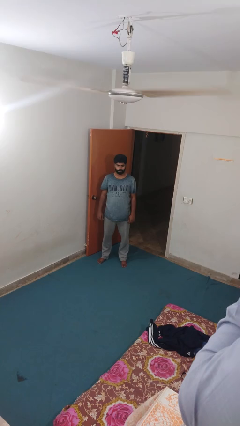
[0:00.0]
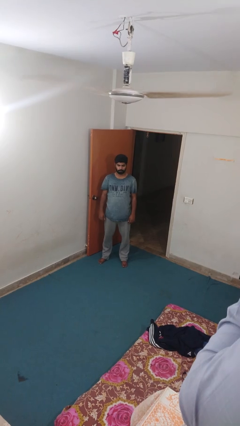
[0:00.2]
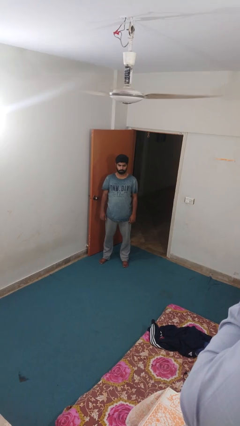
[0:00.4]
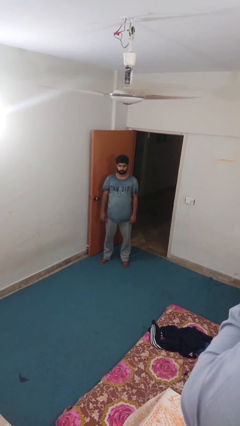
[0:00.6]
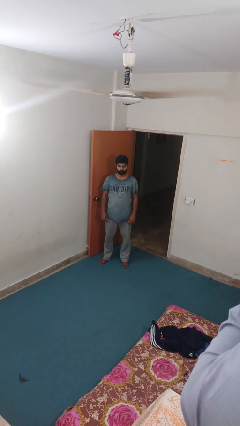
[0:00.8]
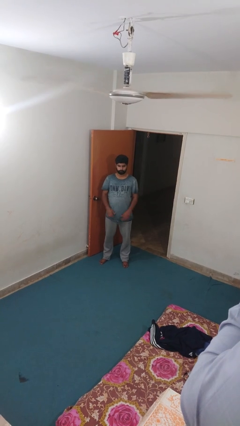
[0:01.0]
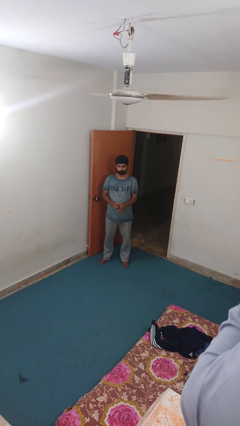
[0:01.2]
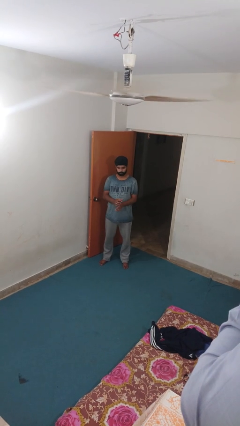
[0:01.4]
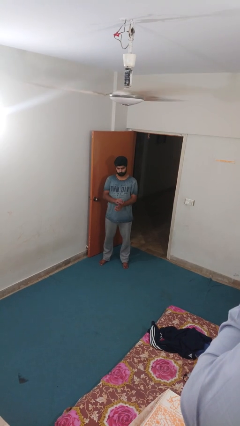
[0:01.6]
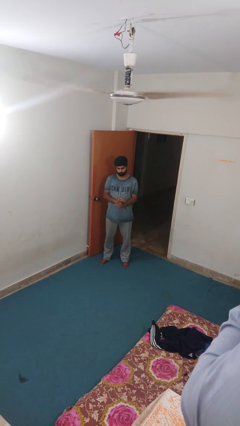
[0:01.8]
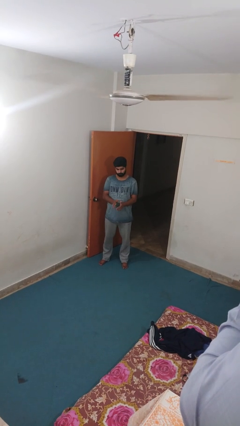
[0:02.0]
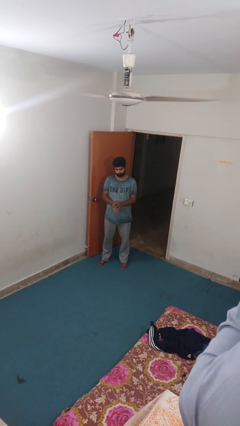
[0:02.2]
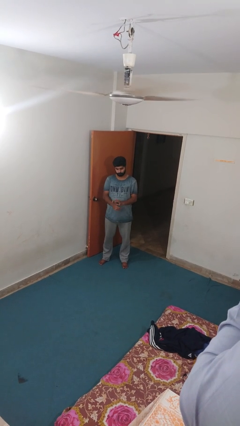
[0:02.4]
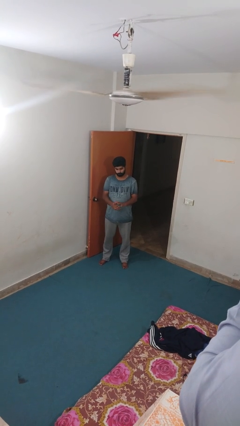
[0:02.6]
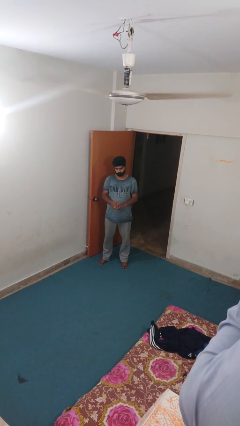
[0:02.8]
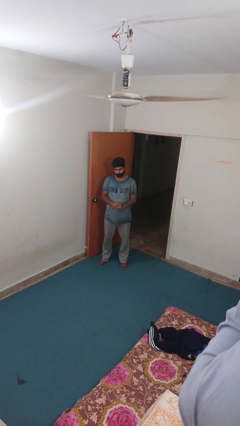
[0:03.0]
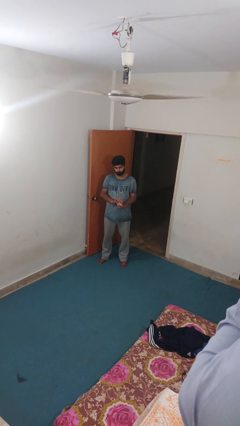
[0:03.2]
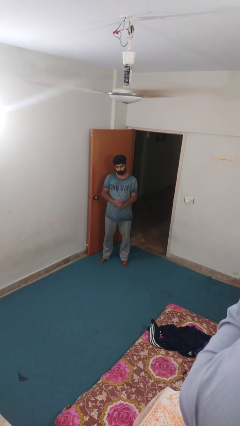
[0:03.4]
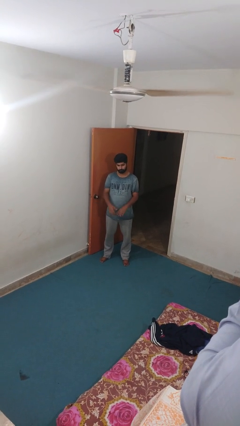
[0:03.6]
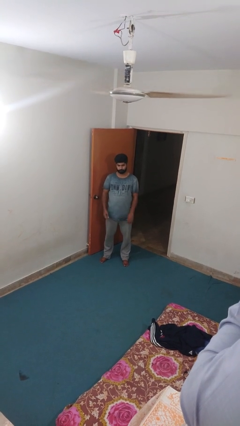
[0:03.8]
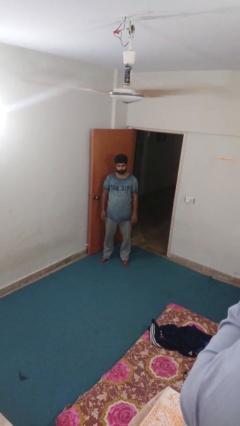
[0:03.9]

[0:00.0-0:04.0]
person snaps fingers

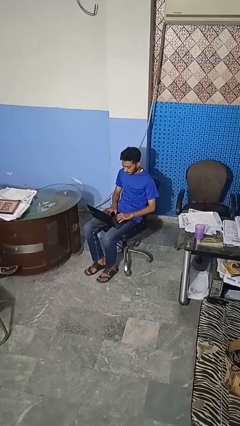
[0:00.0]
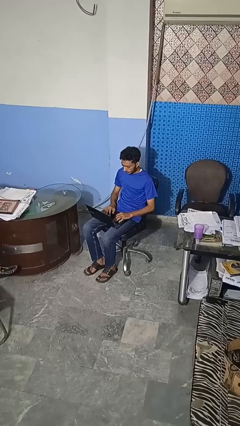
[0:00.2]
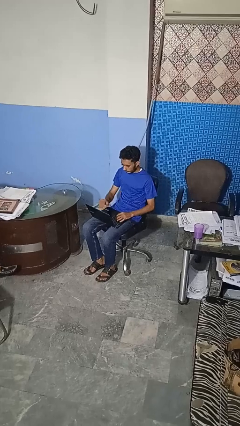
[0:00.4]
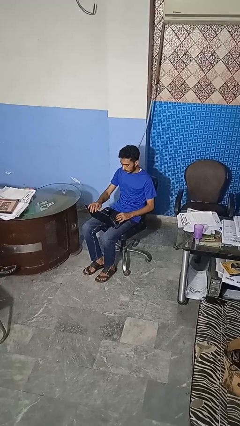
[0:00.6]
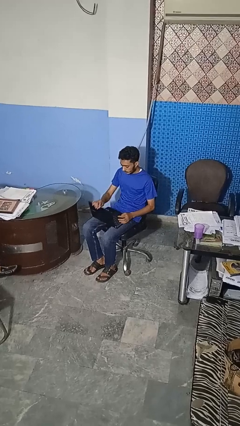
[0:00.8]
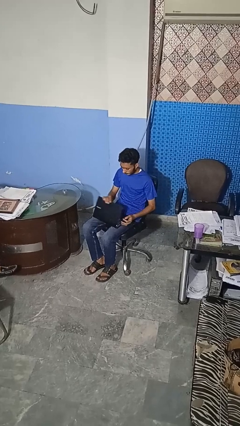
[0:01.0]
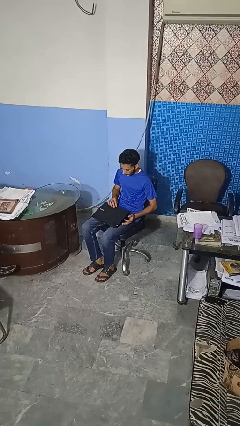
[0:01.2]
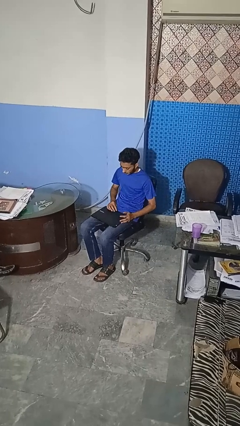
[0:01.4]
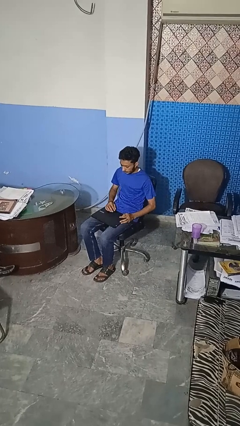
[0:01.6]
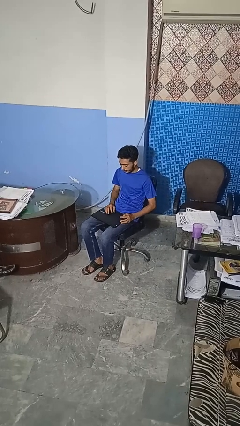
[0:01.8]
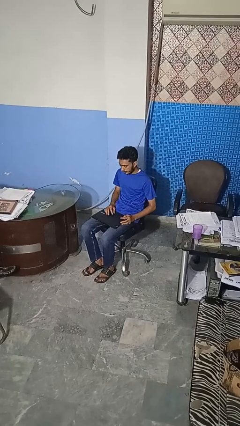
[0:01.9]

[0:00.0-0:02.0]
person closes laptop

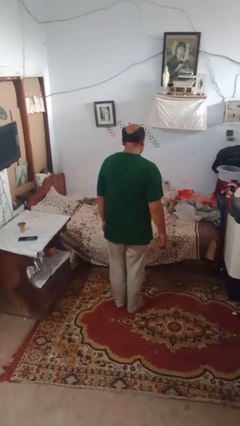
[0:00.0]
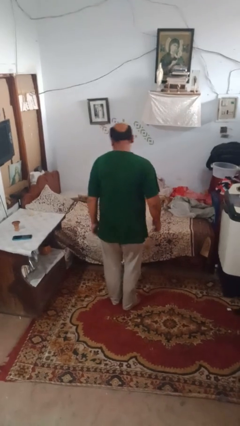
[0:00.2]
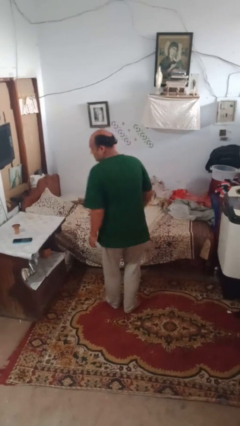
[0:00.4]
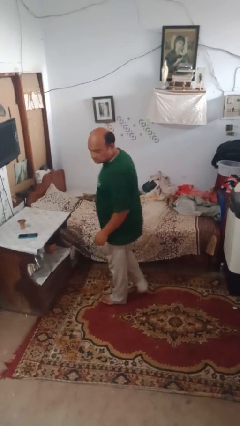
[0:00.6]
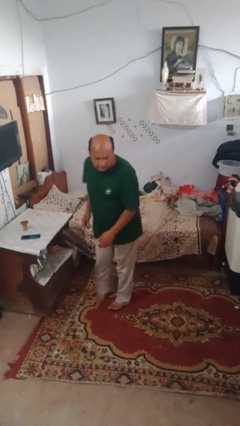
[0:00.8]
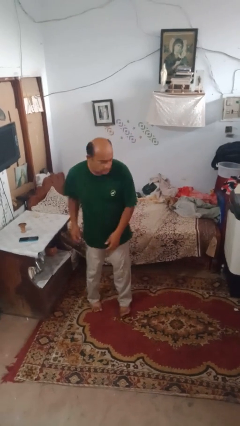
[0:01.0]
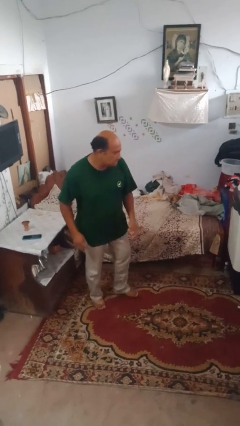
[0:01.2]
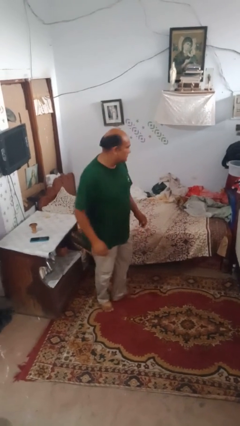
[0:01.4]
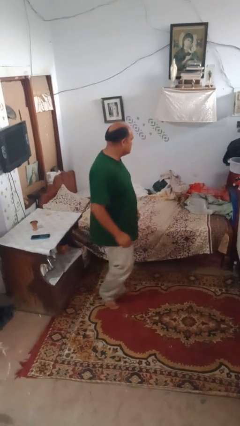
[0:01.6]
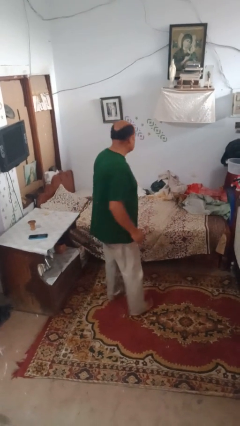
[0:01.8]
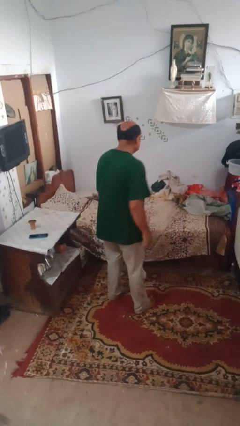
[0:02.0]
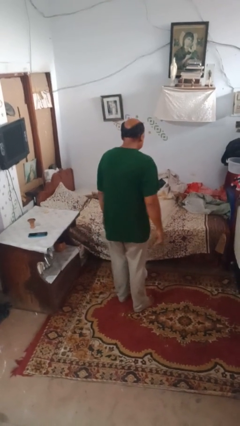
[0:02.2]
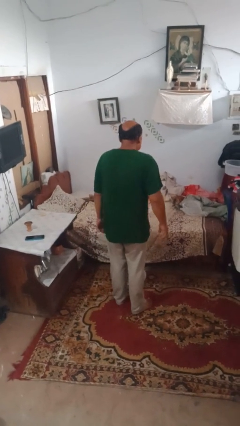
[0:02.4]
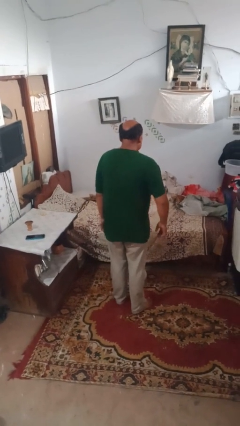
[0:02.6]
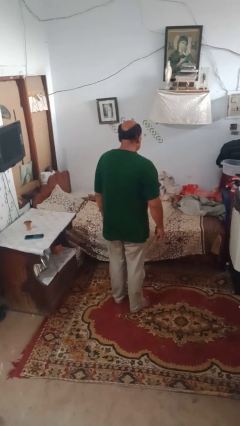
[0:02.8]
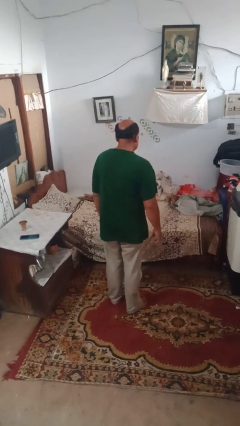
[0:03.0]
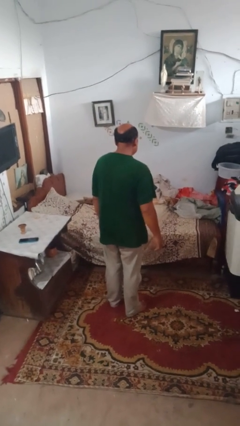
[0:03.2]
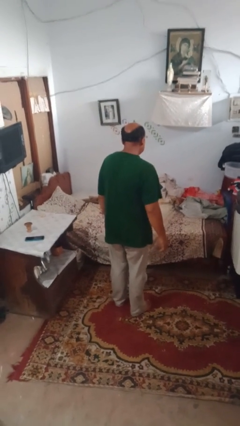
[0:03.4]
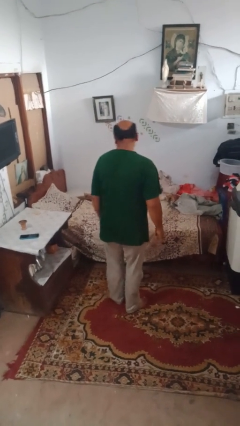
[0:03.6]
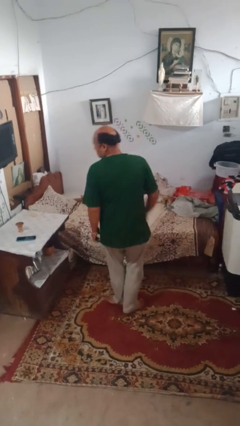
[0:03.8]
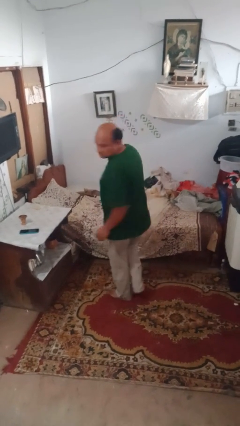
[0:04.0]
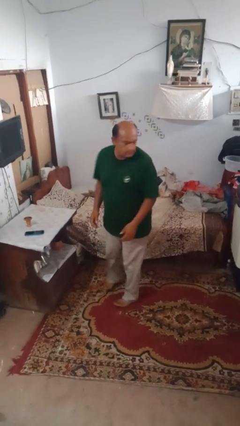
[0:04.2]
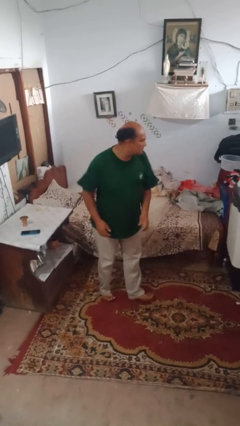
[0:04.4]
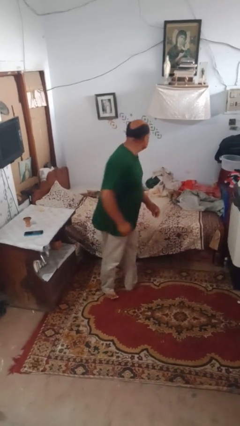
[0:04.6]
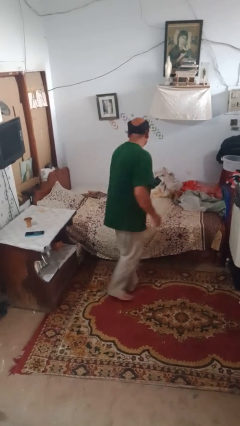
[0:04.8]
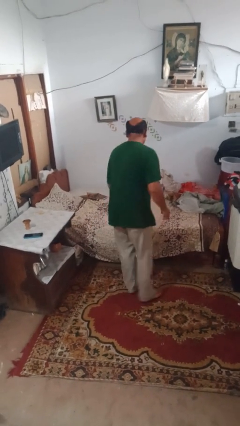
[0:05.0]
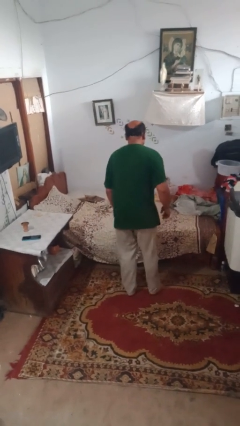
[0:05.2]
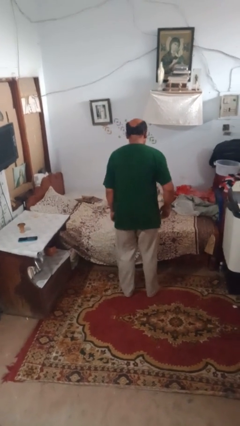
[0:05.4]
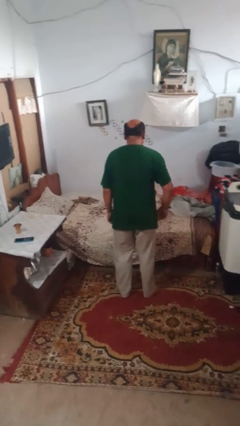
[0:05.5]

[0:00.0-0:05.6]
person twirls

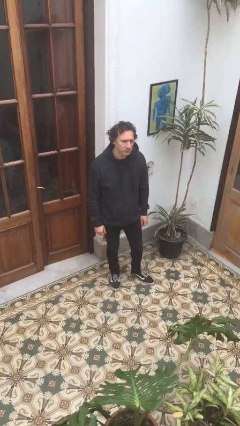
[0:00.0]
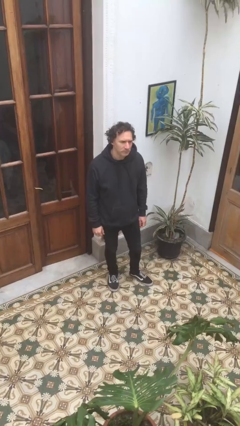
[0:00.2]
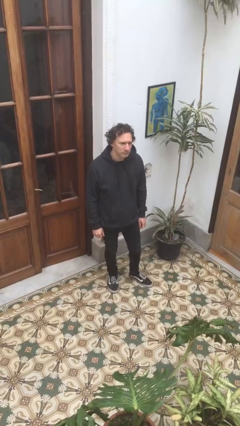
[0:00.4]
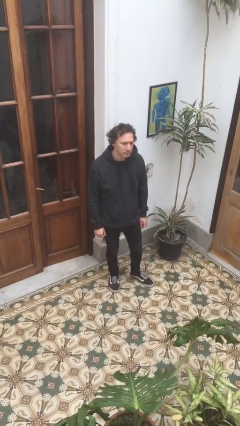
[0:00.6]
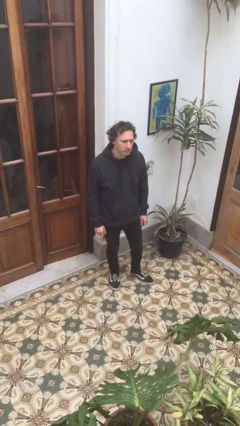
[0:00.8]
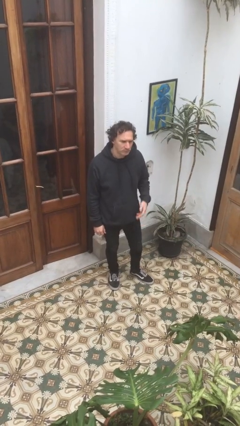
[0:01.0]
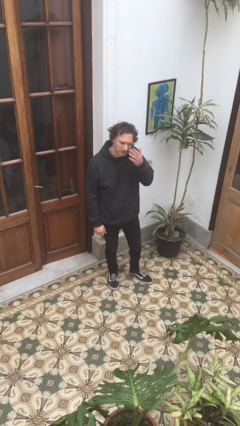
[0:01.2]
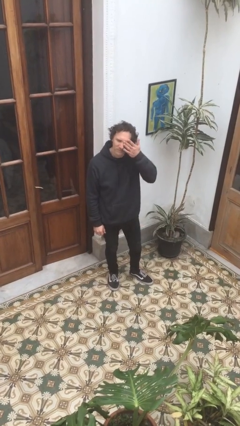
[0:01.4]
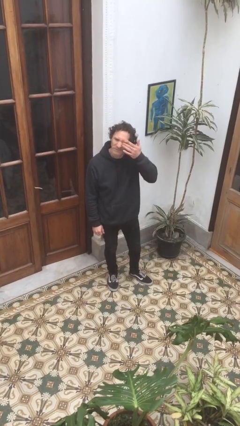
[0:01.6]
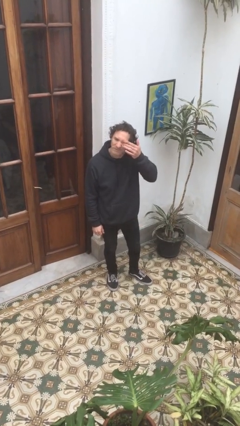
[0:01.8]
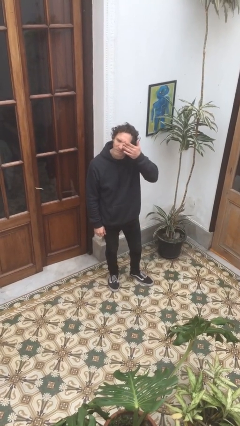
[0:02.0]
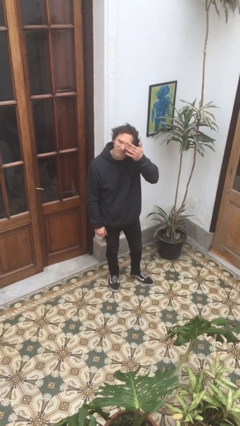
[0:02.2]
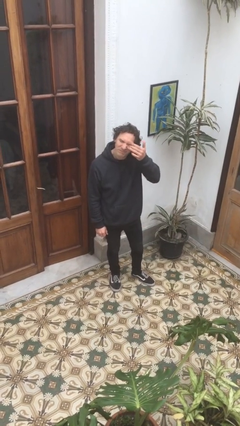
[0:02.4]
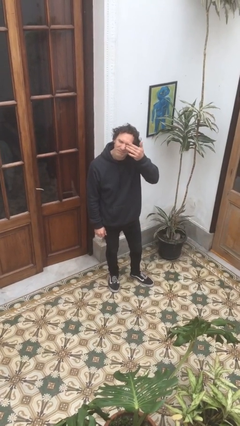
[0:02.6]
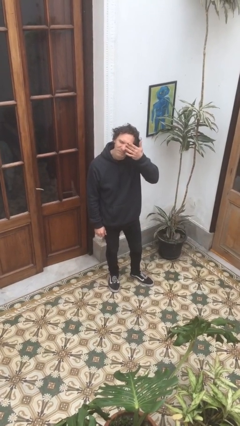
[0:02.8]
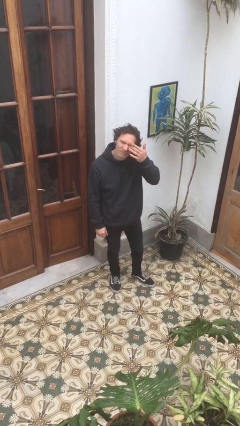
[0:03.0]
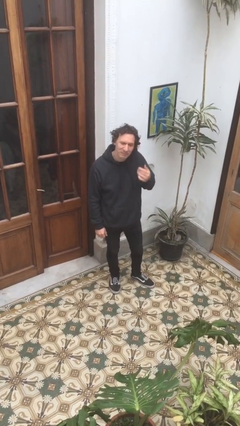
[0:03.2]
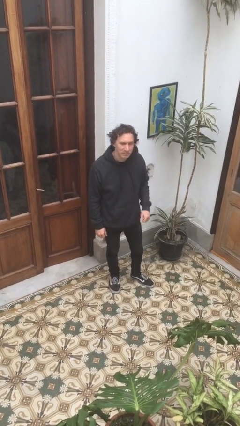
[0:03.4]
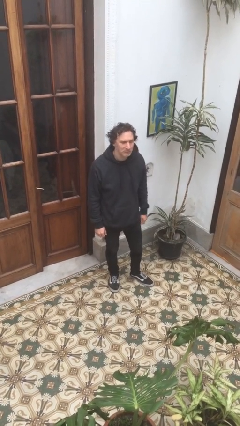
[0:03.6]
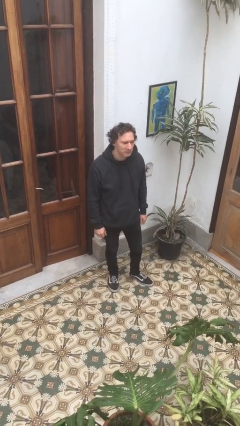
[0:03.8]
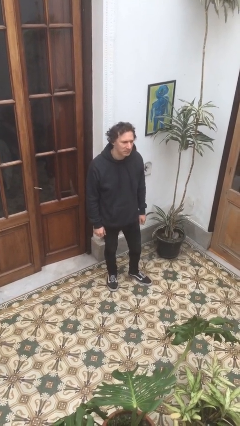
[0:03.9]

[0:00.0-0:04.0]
person rubs eyes

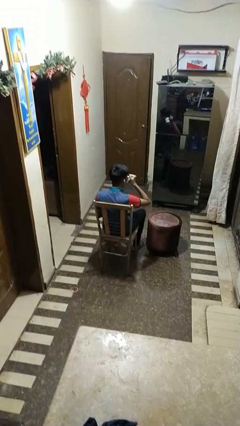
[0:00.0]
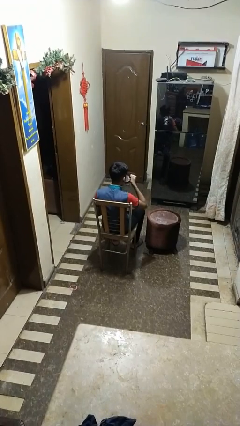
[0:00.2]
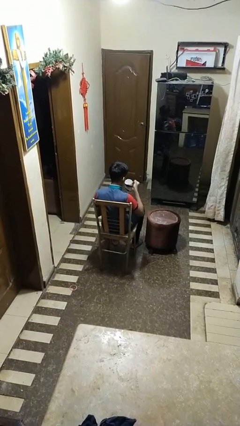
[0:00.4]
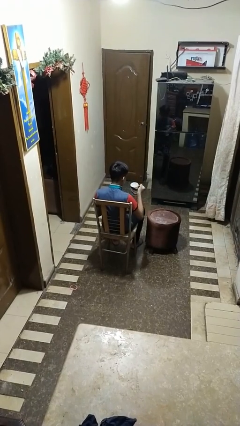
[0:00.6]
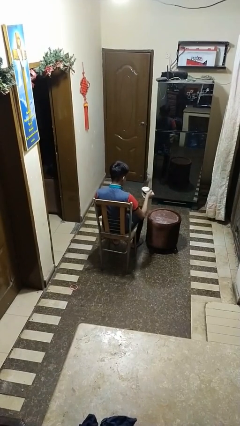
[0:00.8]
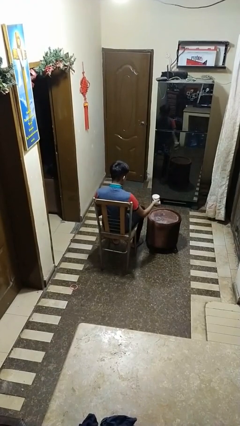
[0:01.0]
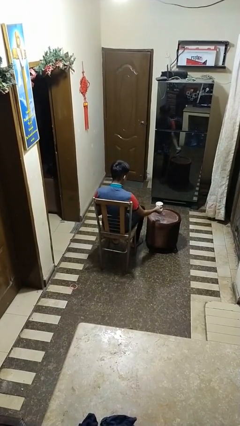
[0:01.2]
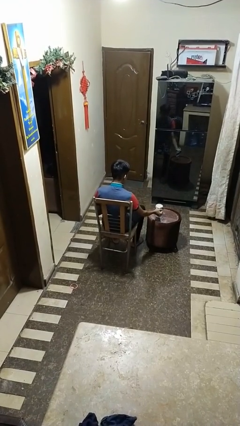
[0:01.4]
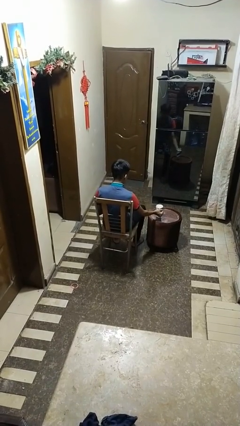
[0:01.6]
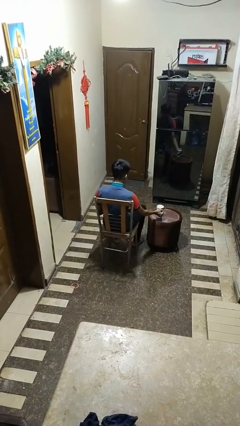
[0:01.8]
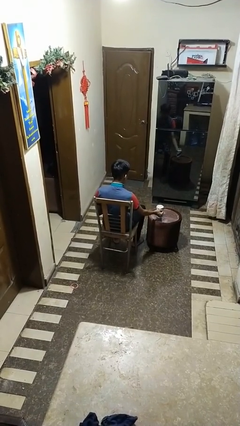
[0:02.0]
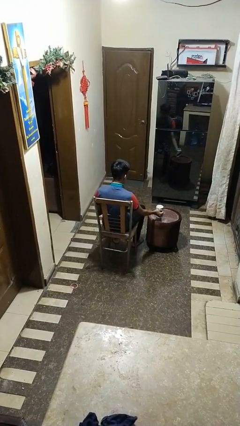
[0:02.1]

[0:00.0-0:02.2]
person puts down object on table
